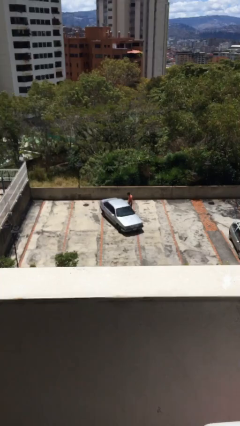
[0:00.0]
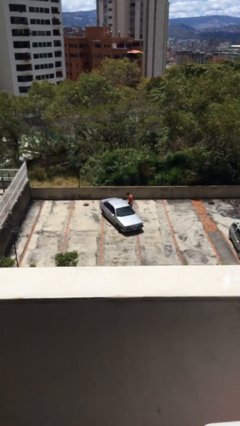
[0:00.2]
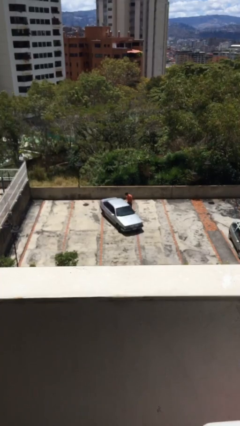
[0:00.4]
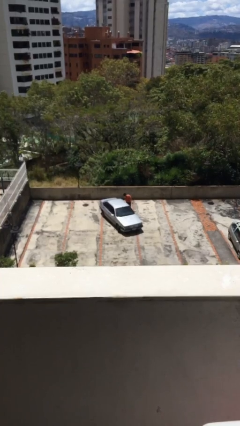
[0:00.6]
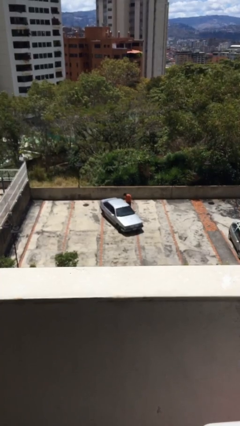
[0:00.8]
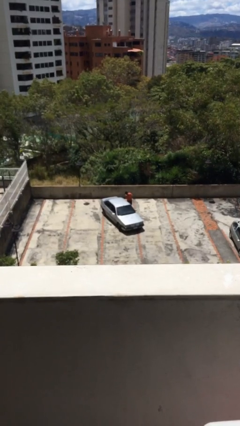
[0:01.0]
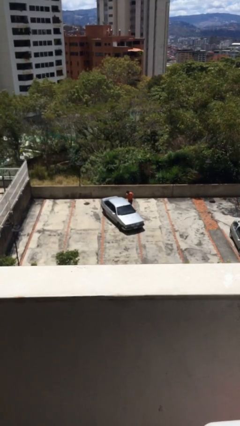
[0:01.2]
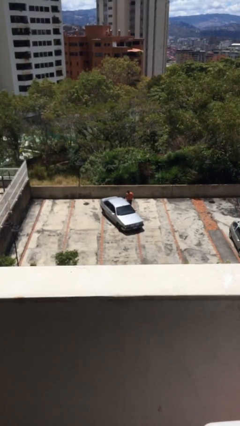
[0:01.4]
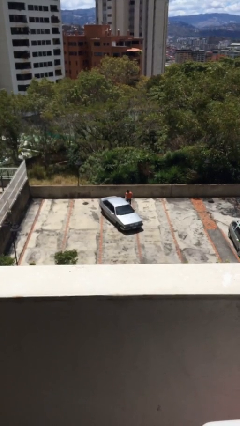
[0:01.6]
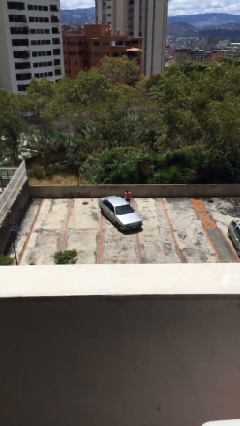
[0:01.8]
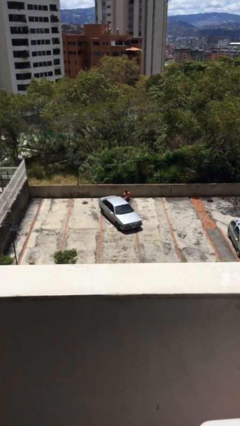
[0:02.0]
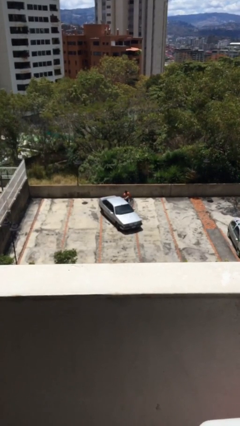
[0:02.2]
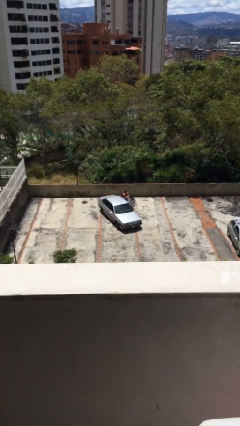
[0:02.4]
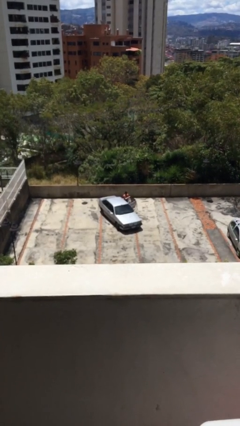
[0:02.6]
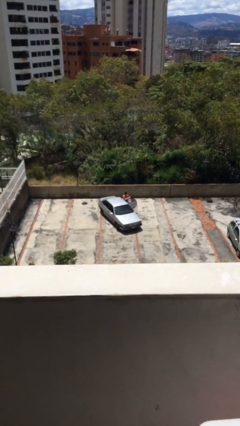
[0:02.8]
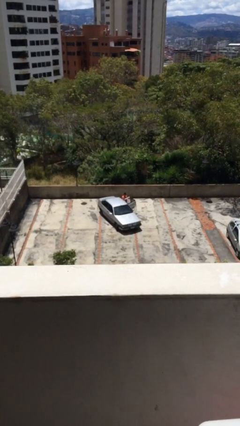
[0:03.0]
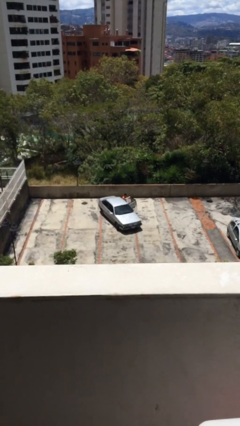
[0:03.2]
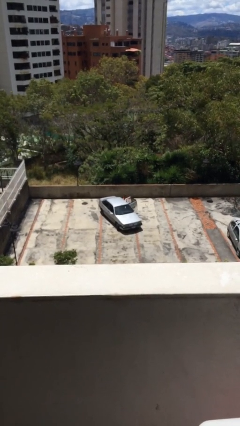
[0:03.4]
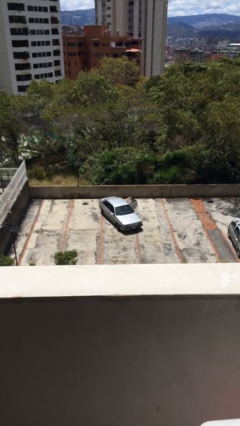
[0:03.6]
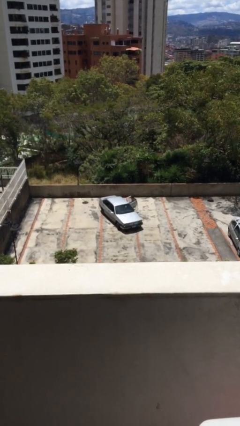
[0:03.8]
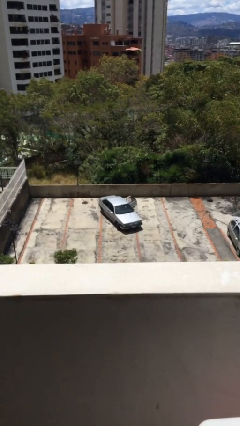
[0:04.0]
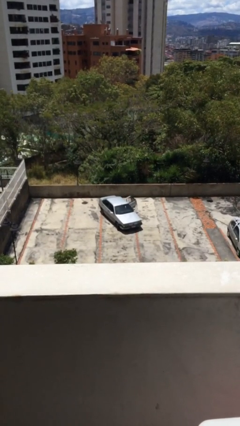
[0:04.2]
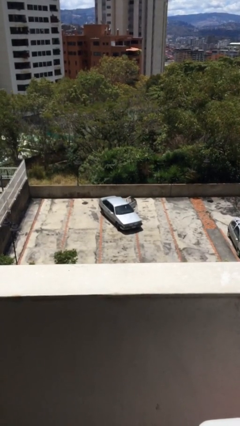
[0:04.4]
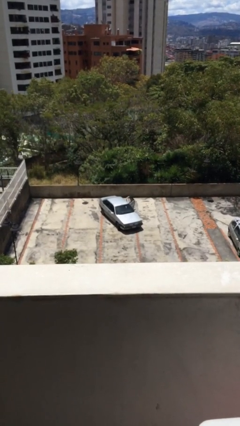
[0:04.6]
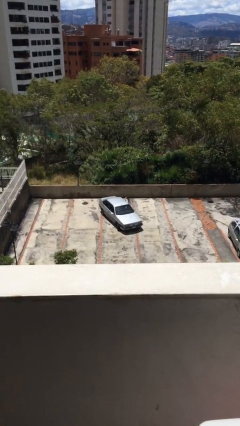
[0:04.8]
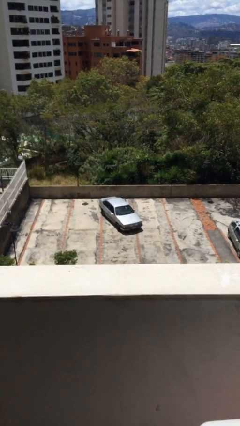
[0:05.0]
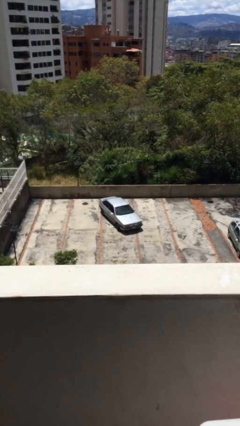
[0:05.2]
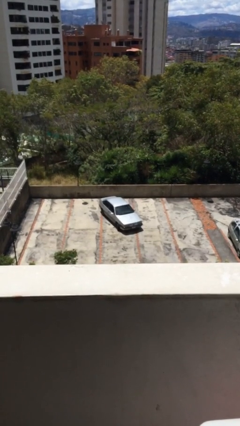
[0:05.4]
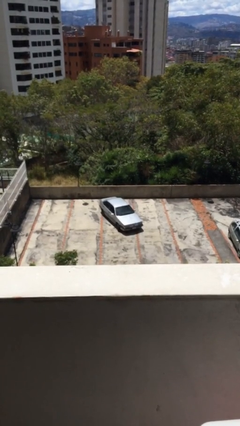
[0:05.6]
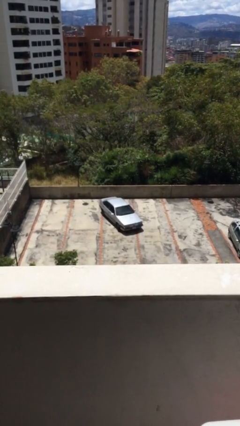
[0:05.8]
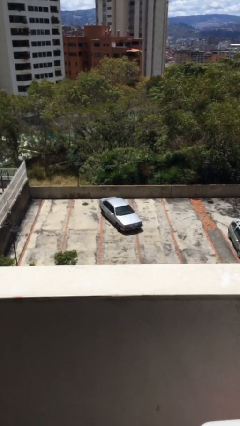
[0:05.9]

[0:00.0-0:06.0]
car picks up person

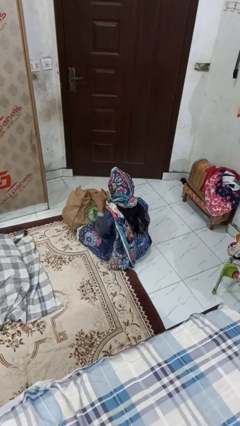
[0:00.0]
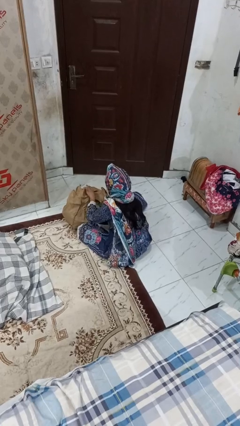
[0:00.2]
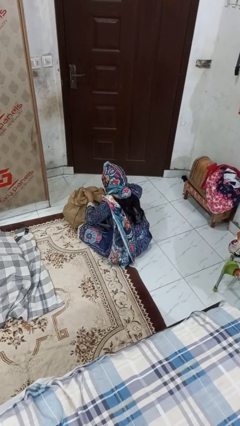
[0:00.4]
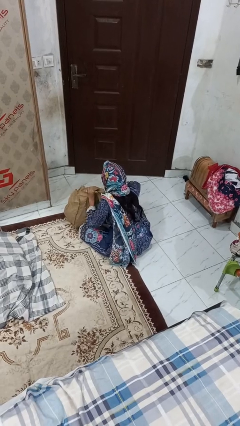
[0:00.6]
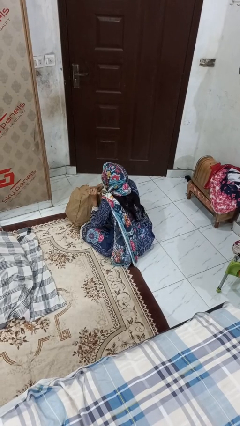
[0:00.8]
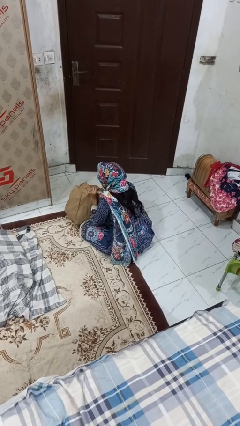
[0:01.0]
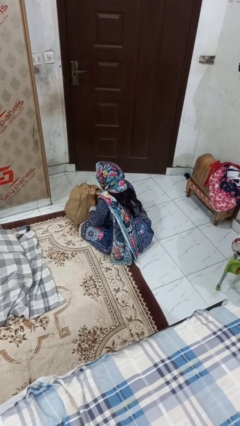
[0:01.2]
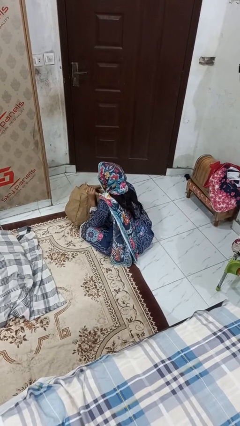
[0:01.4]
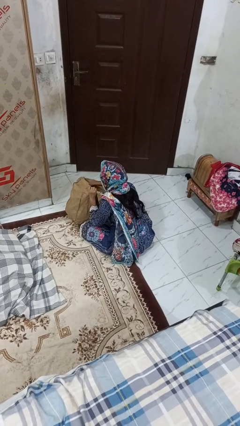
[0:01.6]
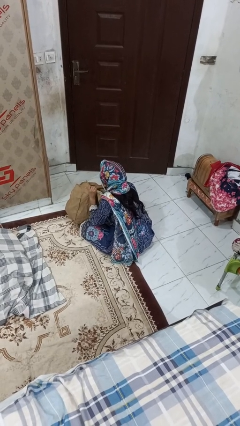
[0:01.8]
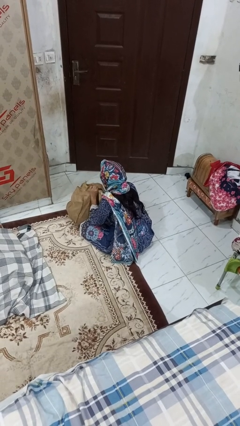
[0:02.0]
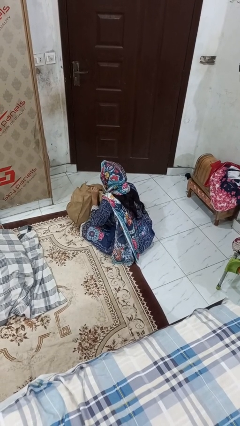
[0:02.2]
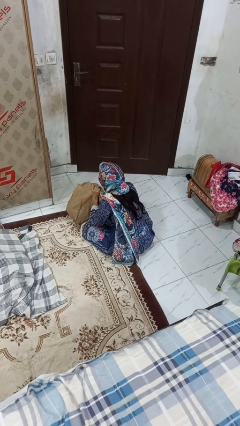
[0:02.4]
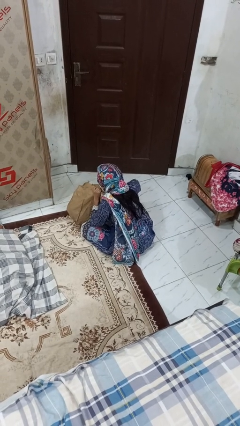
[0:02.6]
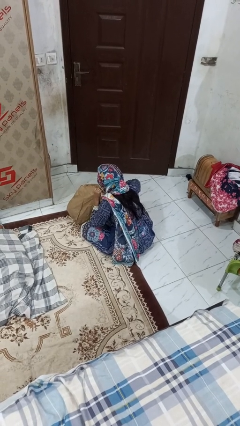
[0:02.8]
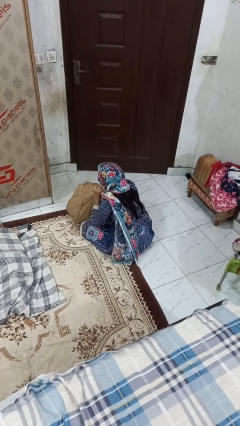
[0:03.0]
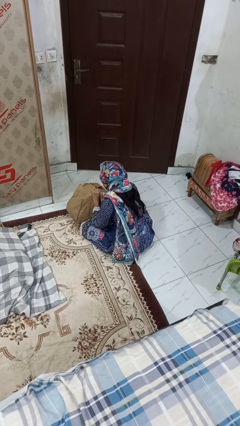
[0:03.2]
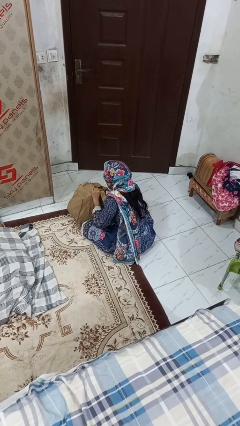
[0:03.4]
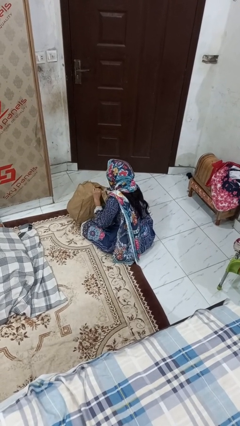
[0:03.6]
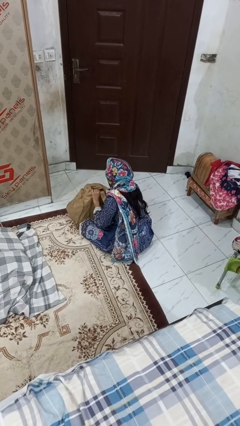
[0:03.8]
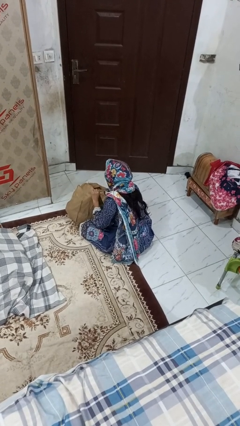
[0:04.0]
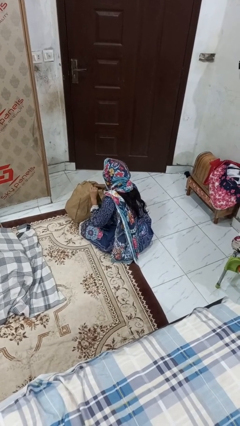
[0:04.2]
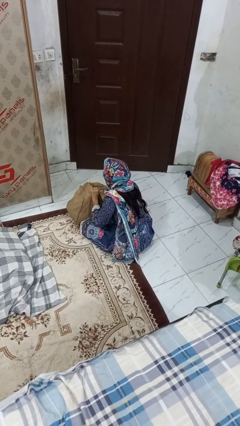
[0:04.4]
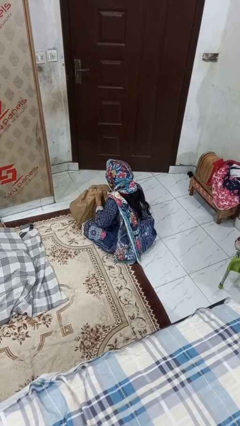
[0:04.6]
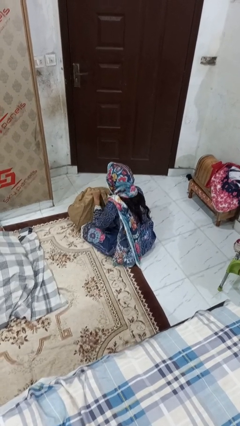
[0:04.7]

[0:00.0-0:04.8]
person searches in bag

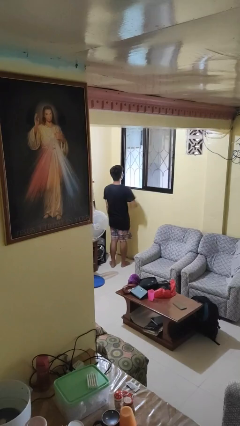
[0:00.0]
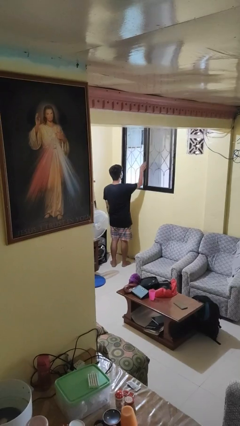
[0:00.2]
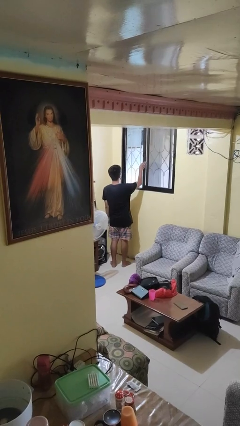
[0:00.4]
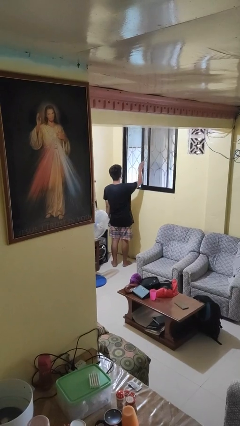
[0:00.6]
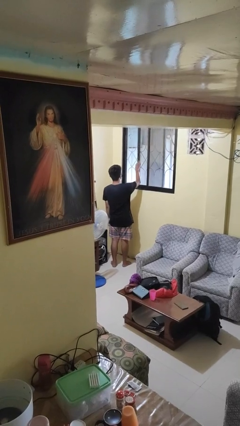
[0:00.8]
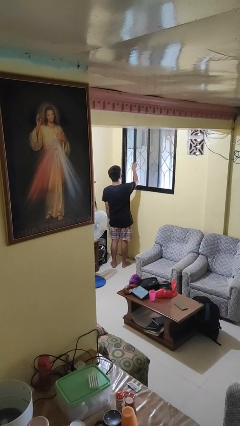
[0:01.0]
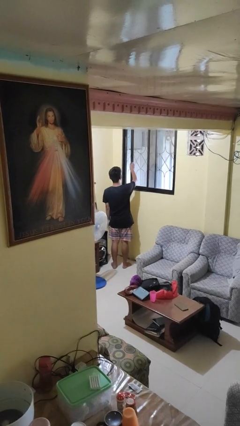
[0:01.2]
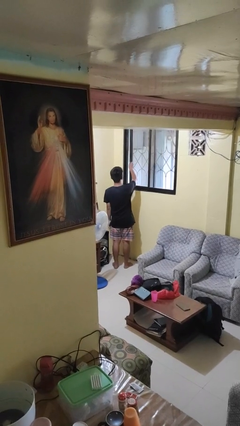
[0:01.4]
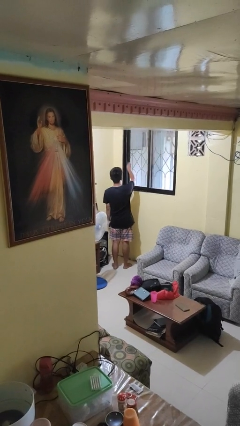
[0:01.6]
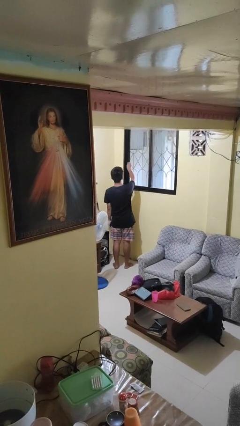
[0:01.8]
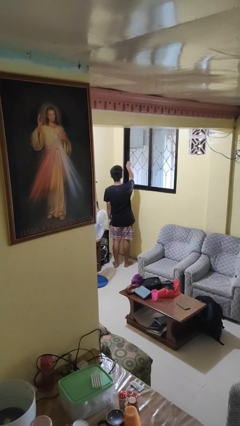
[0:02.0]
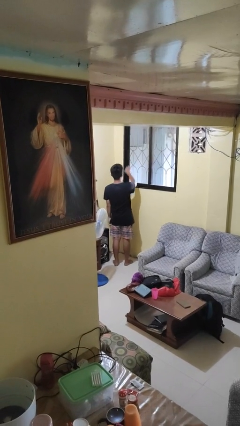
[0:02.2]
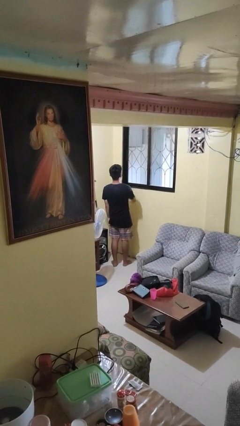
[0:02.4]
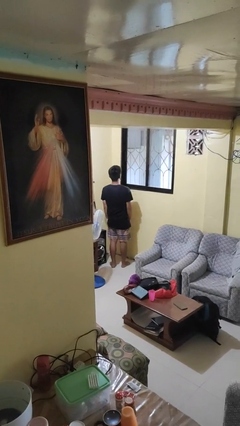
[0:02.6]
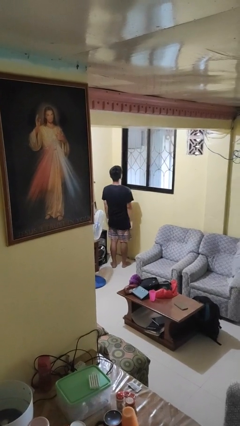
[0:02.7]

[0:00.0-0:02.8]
person closes home window

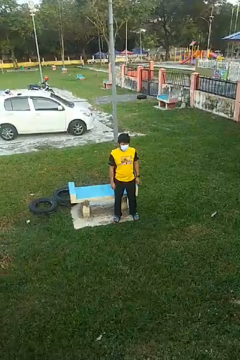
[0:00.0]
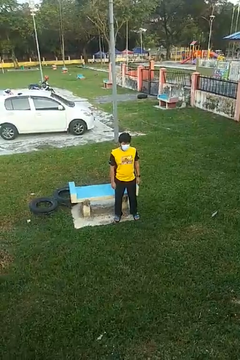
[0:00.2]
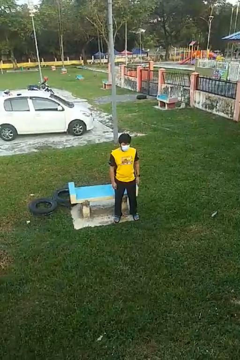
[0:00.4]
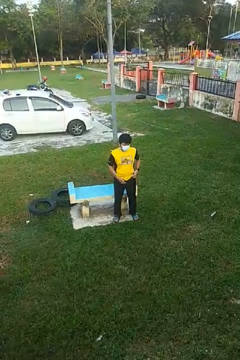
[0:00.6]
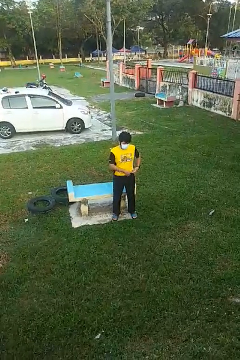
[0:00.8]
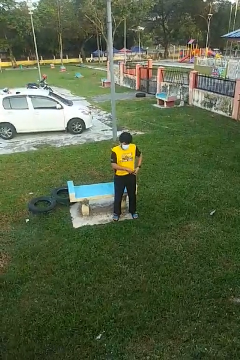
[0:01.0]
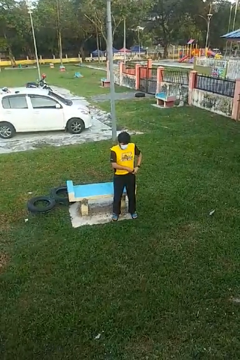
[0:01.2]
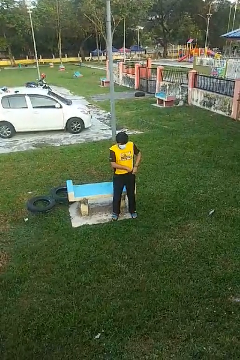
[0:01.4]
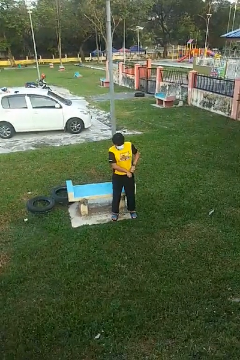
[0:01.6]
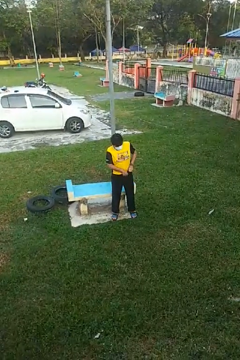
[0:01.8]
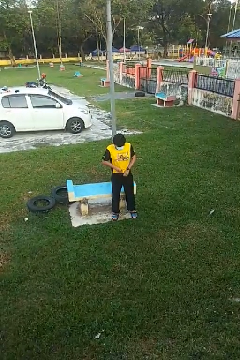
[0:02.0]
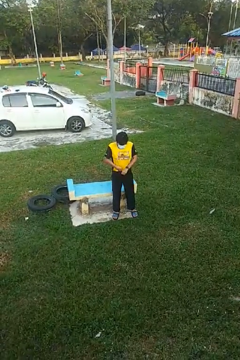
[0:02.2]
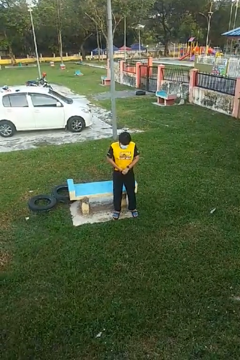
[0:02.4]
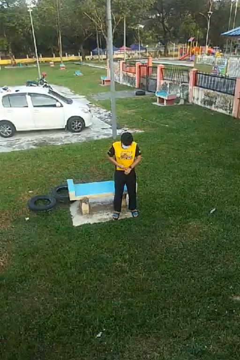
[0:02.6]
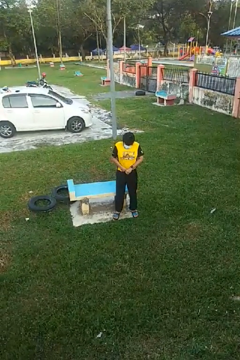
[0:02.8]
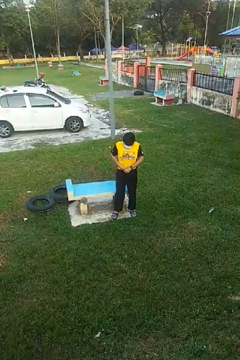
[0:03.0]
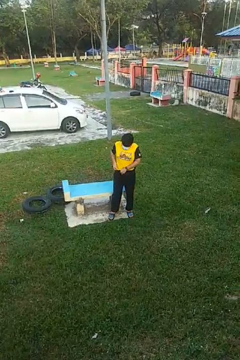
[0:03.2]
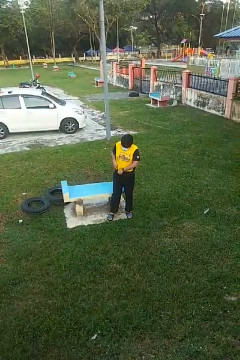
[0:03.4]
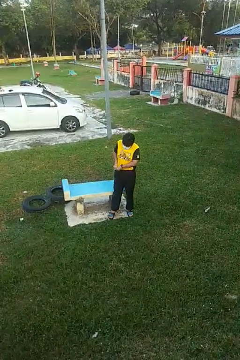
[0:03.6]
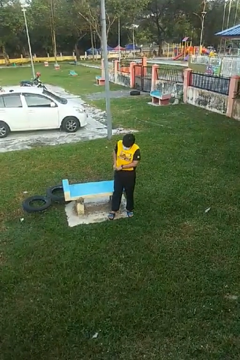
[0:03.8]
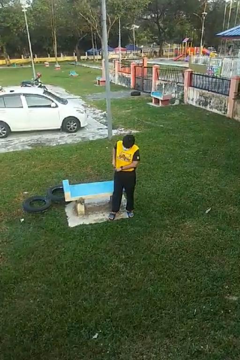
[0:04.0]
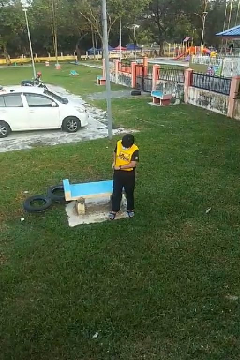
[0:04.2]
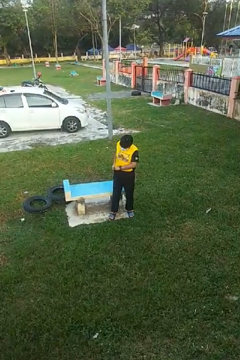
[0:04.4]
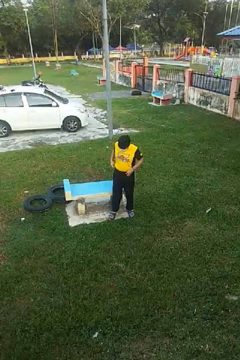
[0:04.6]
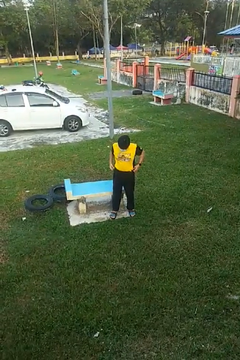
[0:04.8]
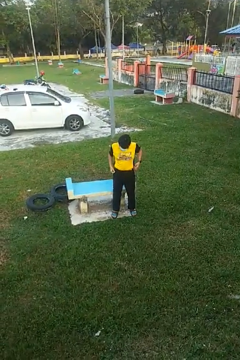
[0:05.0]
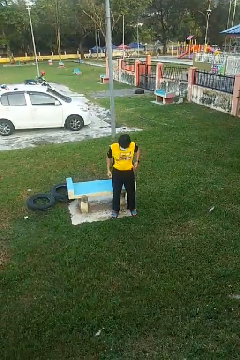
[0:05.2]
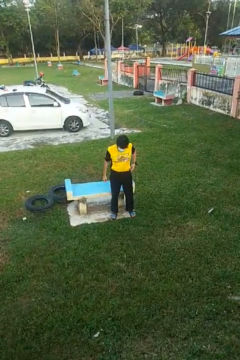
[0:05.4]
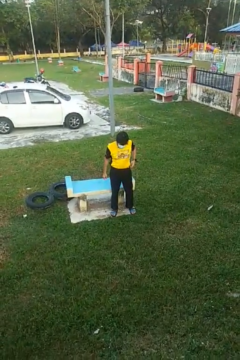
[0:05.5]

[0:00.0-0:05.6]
person tucks in shirt
